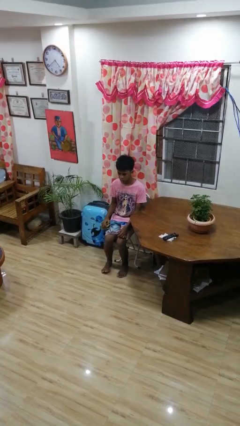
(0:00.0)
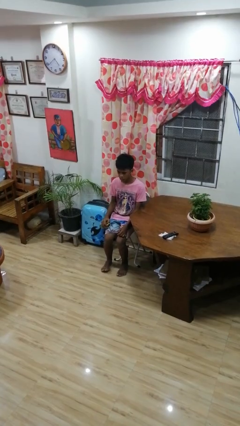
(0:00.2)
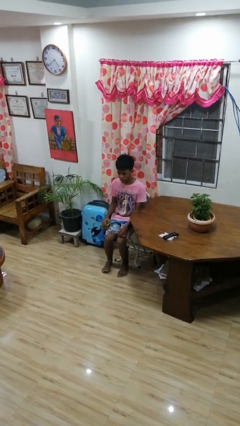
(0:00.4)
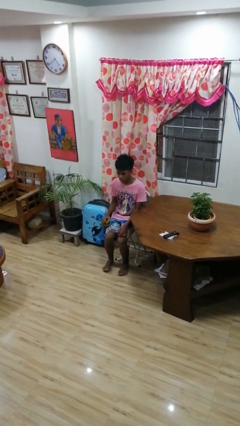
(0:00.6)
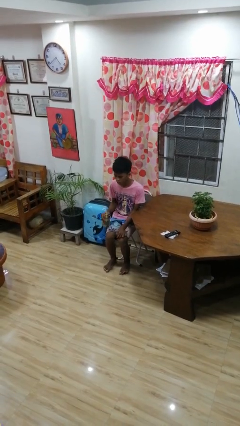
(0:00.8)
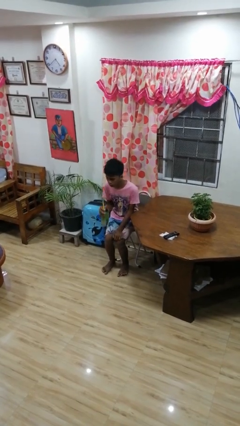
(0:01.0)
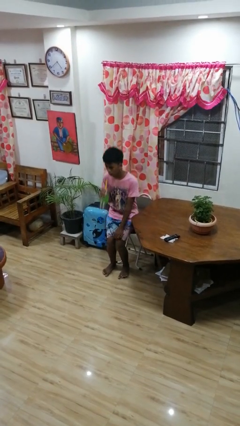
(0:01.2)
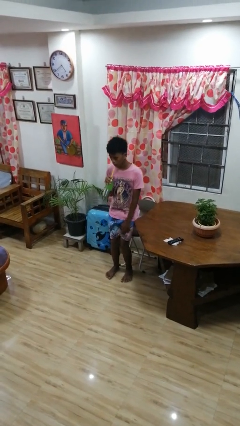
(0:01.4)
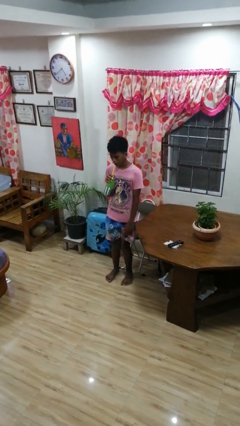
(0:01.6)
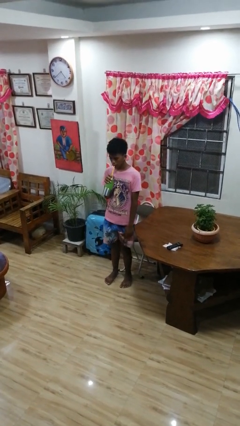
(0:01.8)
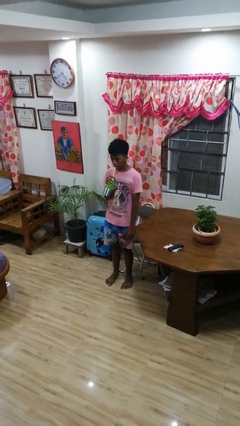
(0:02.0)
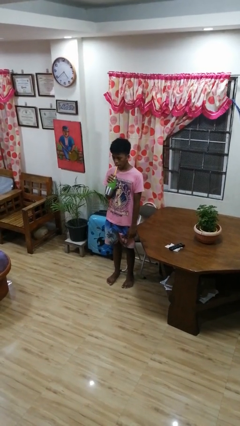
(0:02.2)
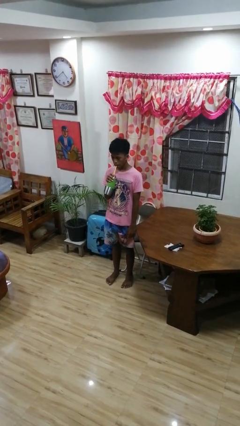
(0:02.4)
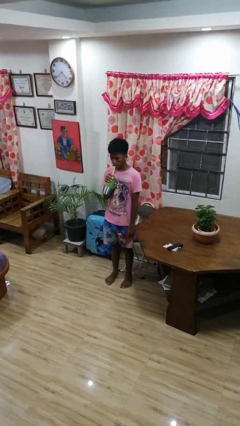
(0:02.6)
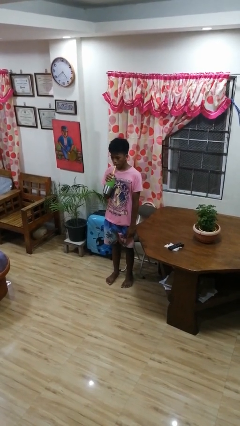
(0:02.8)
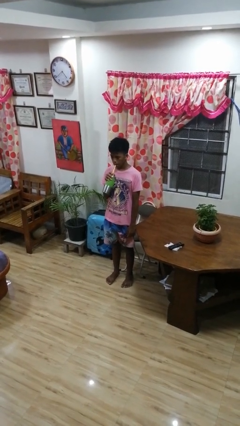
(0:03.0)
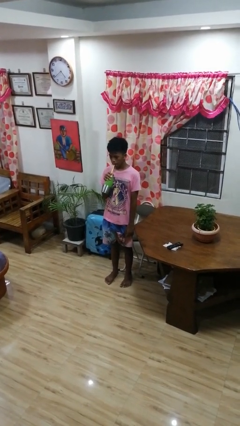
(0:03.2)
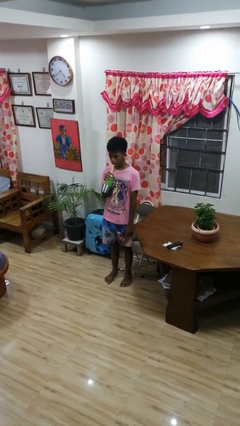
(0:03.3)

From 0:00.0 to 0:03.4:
person drinks from straw

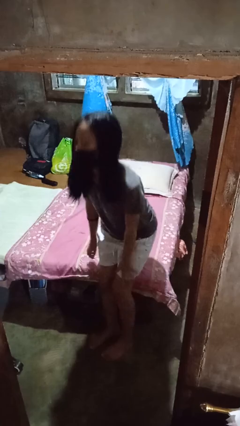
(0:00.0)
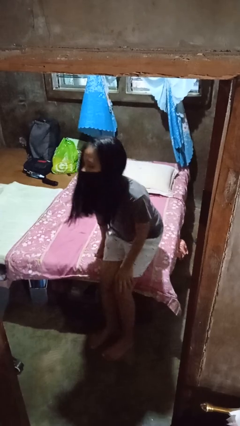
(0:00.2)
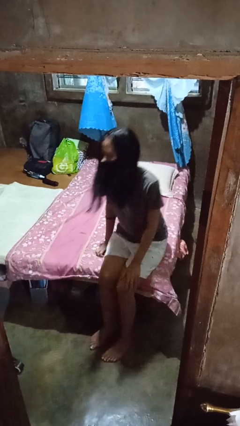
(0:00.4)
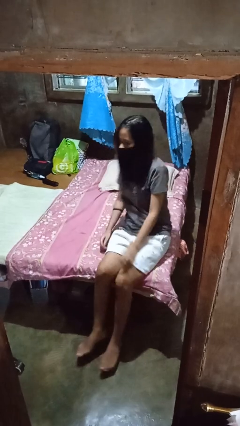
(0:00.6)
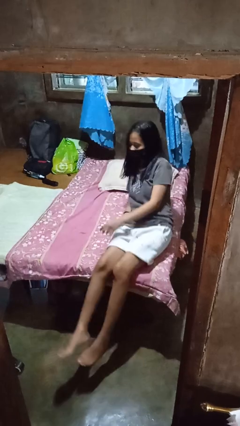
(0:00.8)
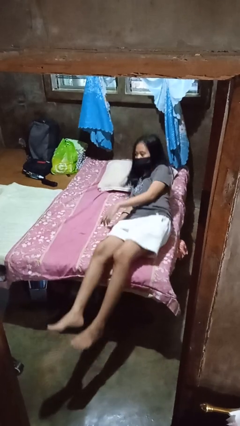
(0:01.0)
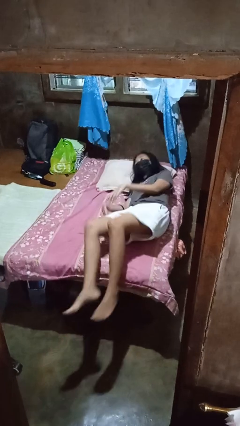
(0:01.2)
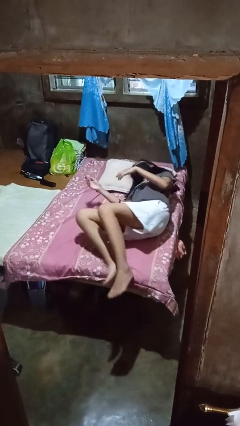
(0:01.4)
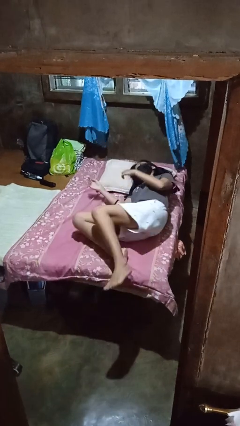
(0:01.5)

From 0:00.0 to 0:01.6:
person lies down on bed

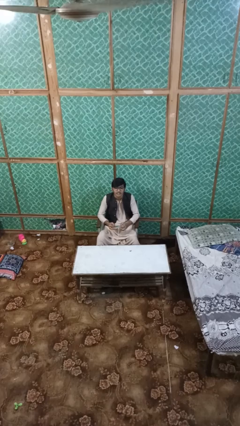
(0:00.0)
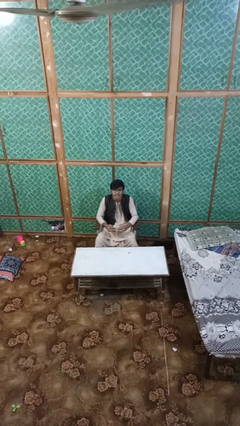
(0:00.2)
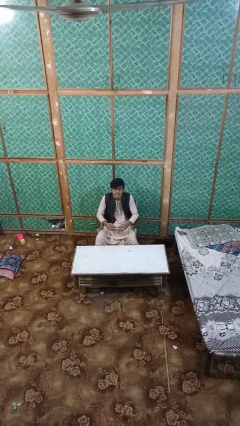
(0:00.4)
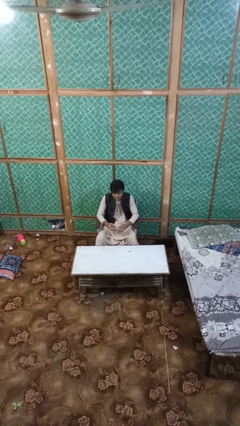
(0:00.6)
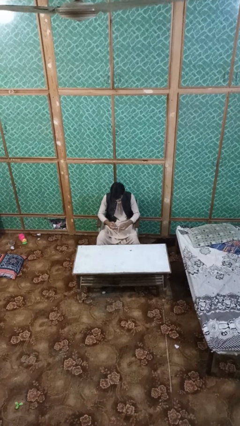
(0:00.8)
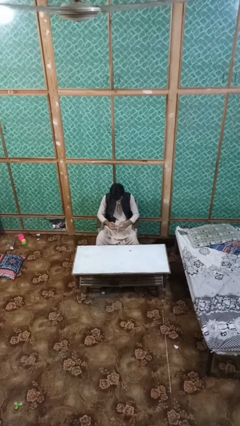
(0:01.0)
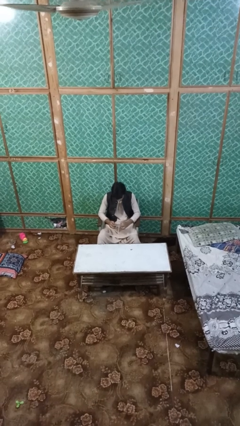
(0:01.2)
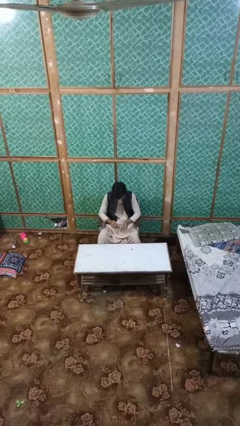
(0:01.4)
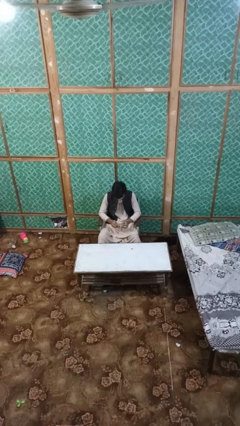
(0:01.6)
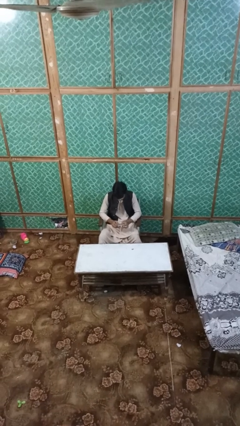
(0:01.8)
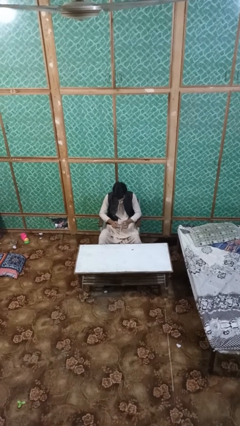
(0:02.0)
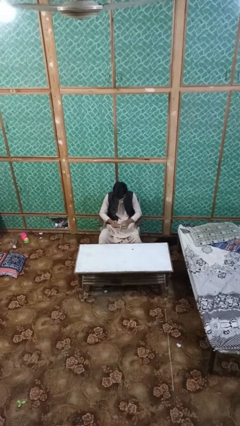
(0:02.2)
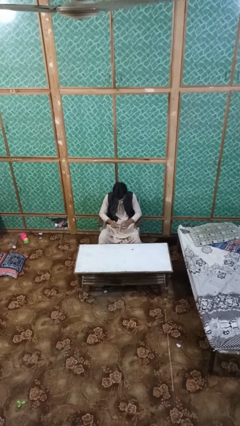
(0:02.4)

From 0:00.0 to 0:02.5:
person interacts with handheld game

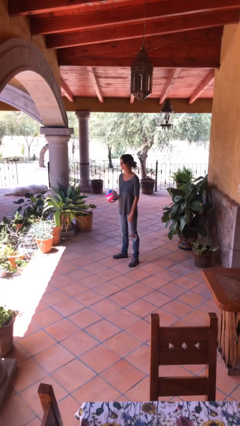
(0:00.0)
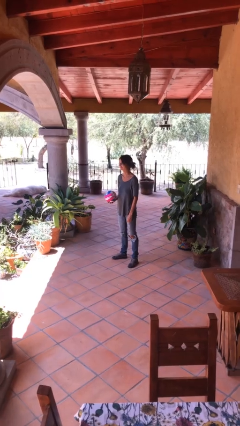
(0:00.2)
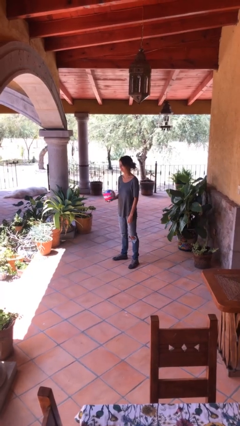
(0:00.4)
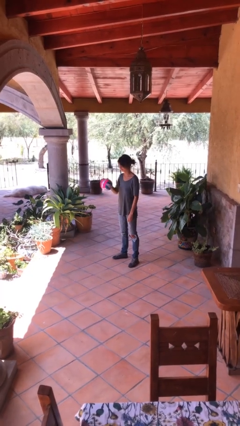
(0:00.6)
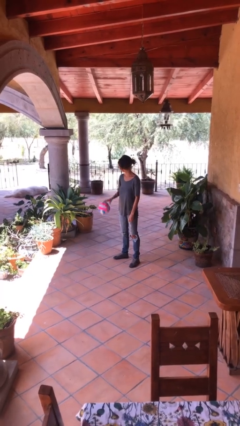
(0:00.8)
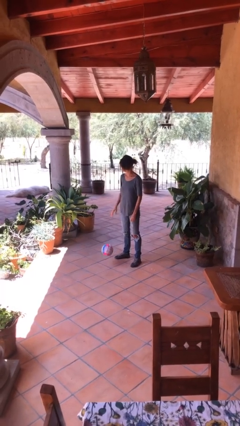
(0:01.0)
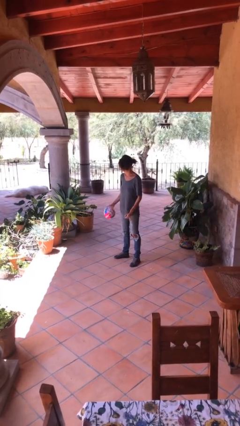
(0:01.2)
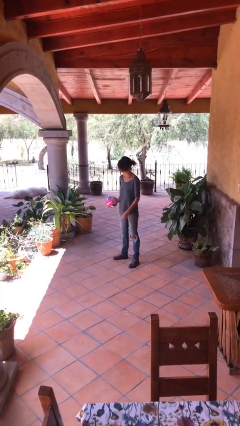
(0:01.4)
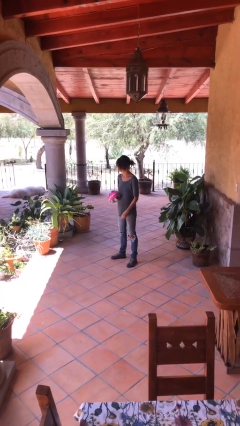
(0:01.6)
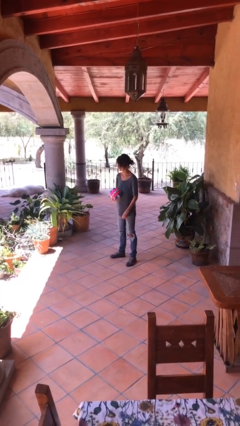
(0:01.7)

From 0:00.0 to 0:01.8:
person bounces ball on floor

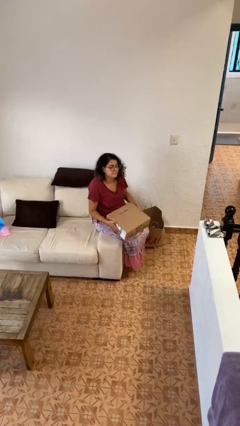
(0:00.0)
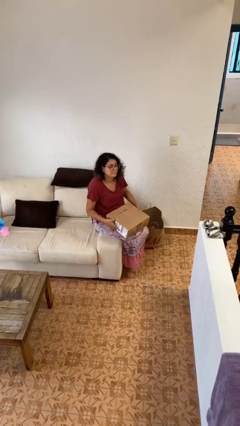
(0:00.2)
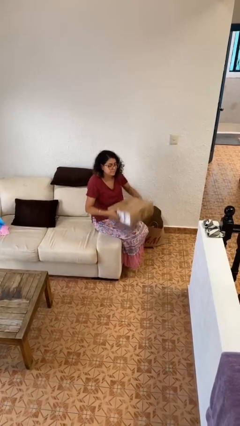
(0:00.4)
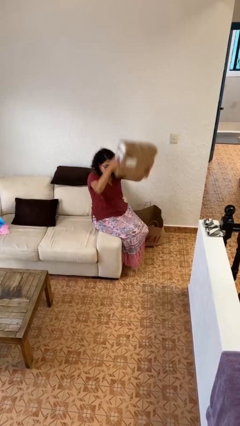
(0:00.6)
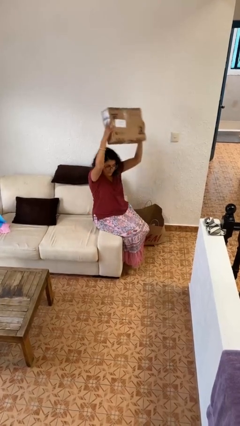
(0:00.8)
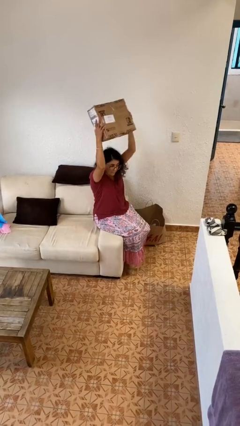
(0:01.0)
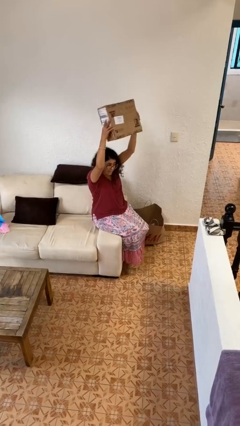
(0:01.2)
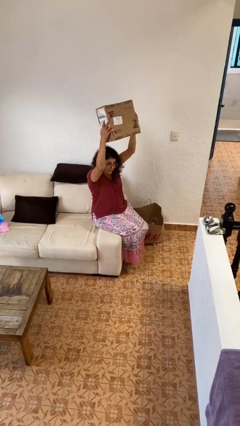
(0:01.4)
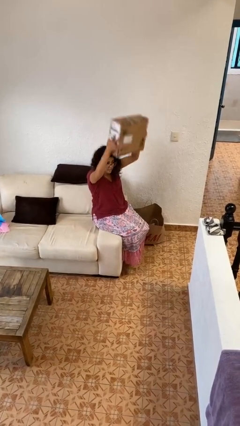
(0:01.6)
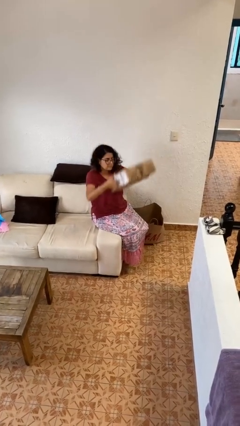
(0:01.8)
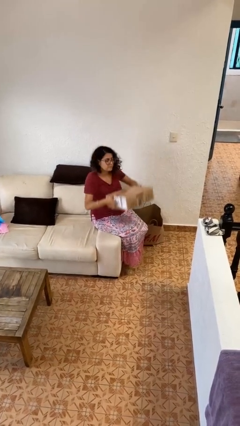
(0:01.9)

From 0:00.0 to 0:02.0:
person holds object above head

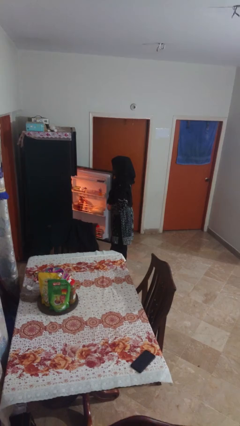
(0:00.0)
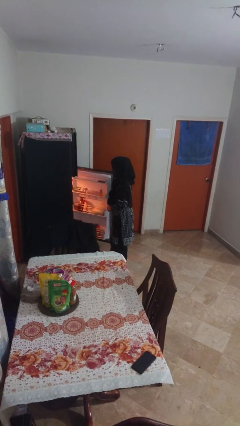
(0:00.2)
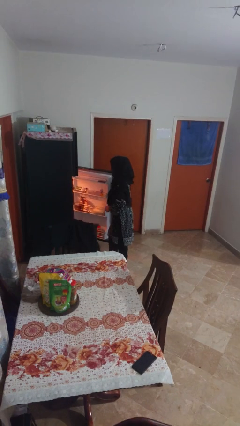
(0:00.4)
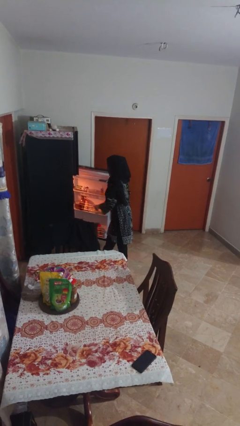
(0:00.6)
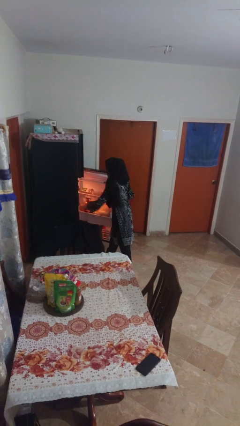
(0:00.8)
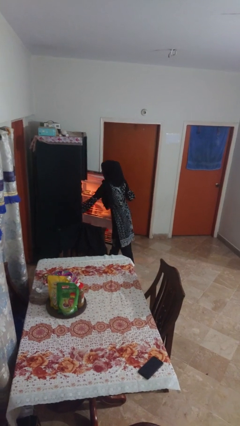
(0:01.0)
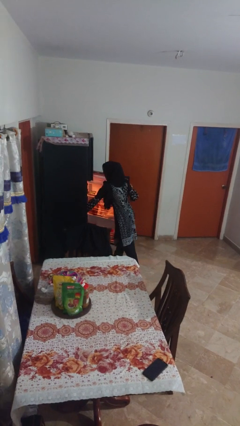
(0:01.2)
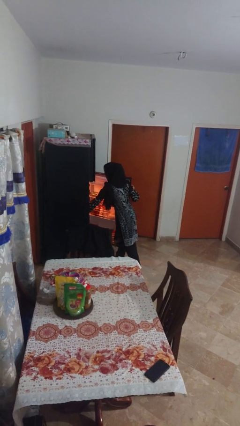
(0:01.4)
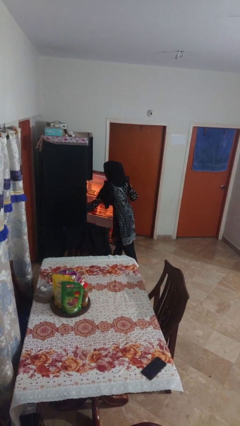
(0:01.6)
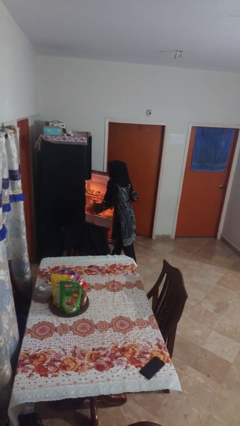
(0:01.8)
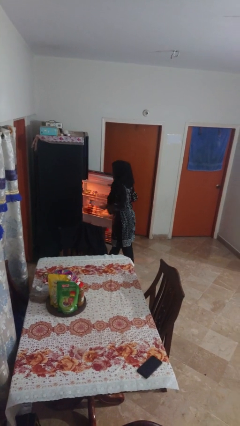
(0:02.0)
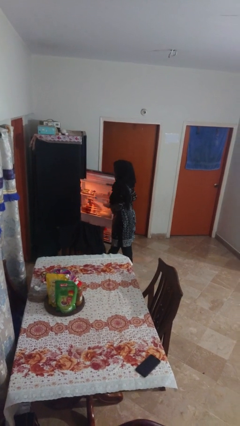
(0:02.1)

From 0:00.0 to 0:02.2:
person takes object from refrigerator

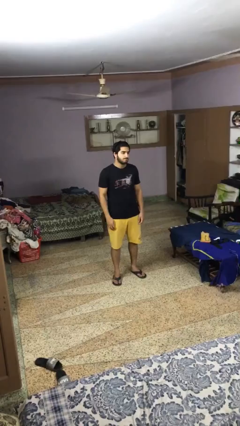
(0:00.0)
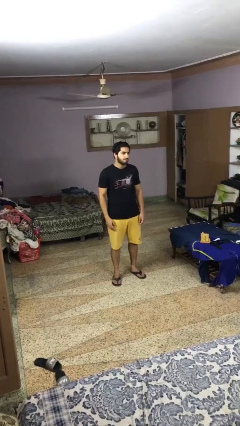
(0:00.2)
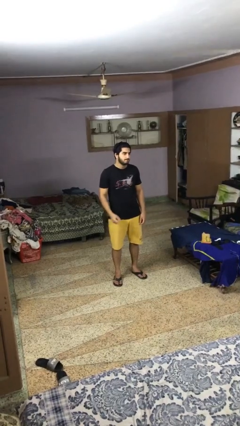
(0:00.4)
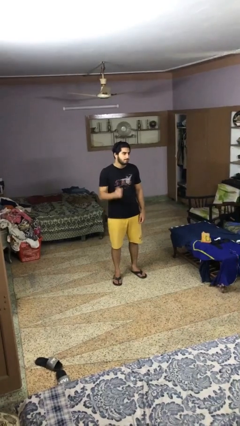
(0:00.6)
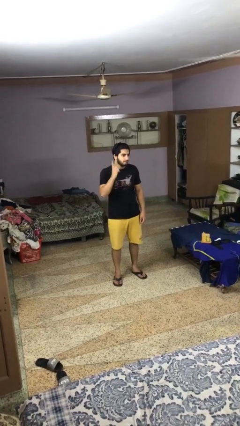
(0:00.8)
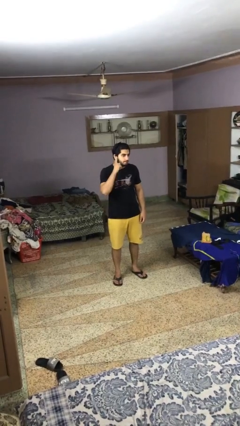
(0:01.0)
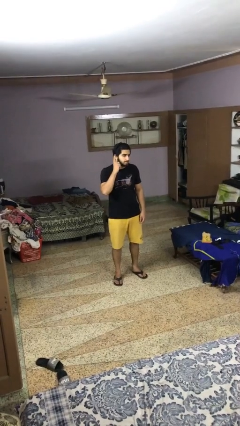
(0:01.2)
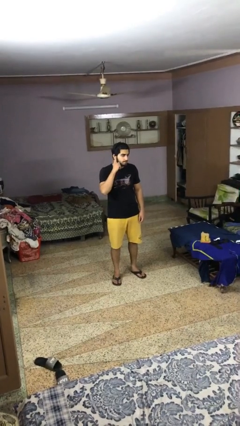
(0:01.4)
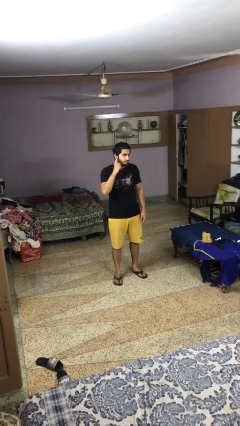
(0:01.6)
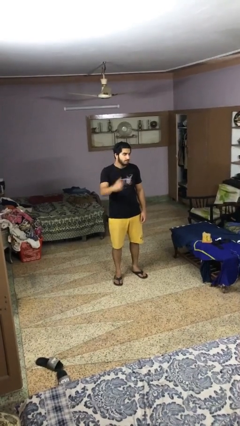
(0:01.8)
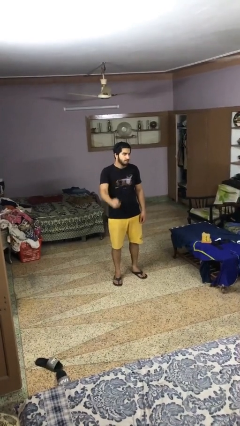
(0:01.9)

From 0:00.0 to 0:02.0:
person gestures listen closely

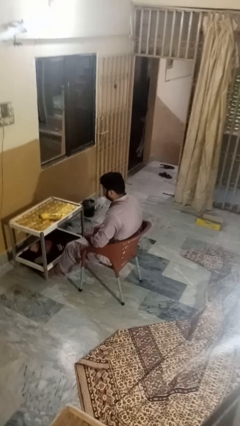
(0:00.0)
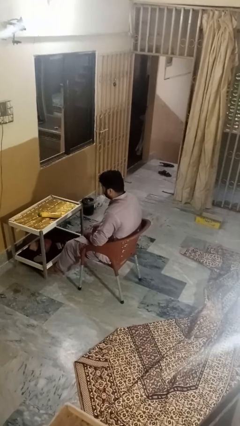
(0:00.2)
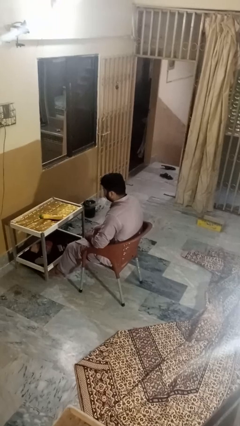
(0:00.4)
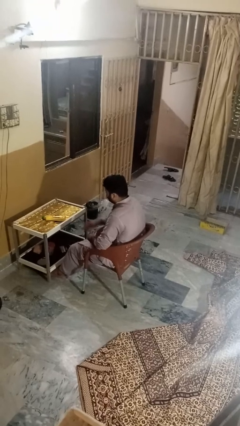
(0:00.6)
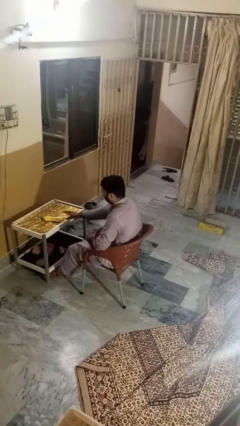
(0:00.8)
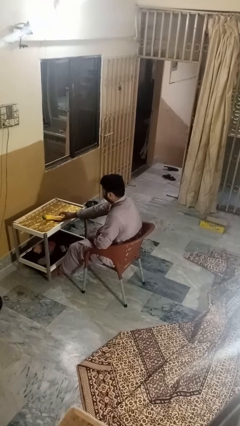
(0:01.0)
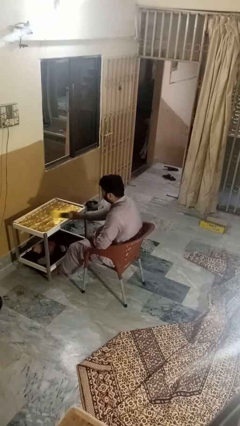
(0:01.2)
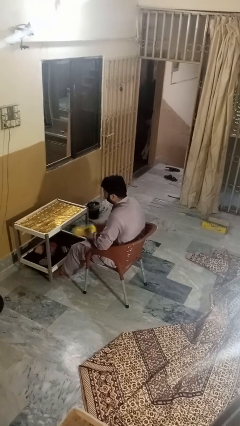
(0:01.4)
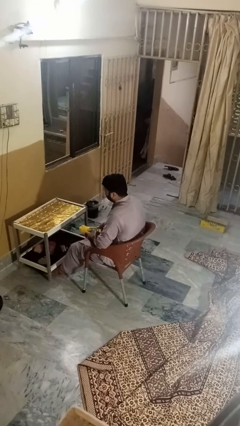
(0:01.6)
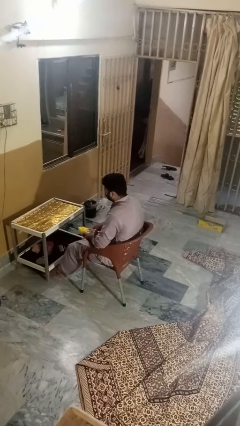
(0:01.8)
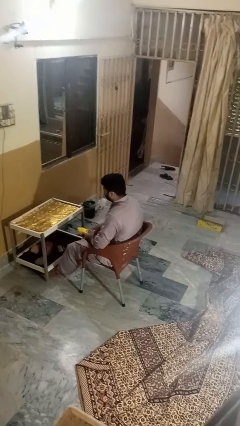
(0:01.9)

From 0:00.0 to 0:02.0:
person picks up object from table
